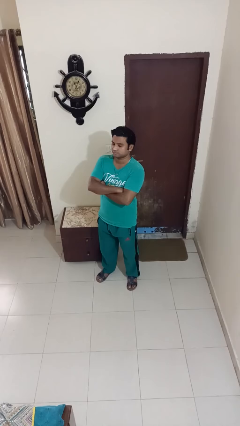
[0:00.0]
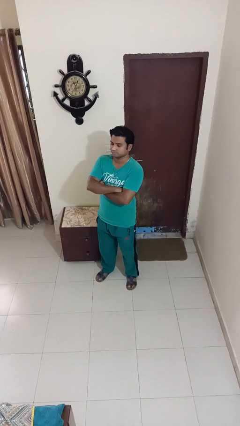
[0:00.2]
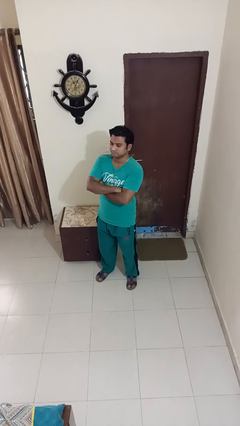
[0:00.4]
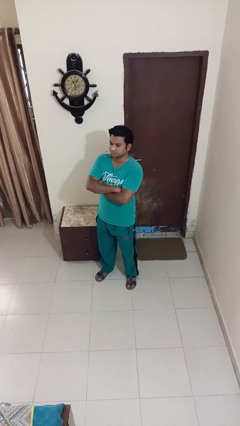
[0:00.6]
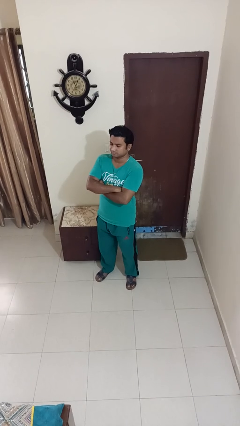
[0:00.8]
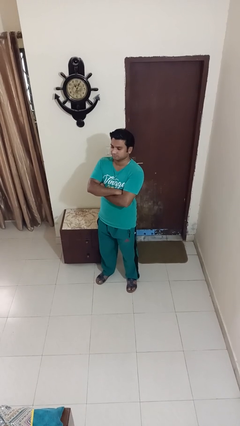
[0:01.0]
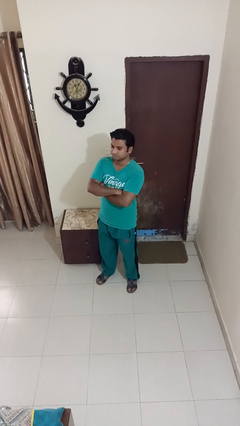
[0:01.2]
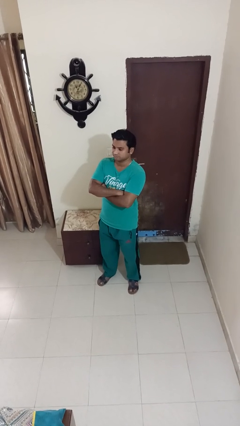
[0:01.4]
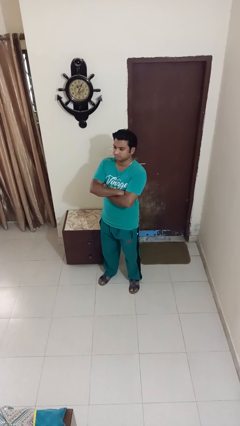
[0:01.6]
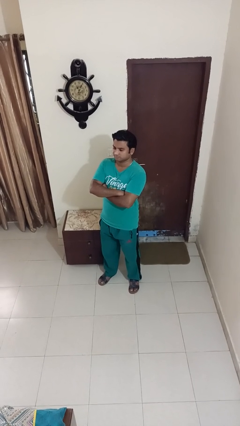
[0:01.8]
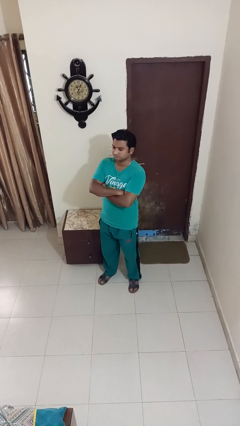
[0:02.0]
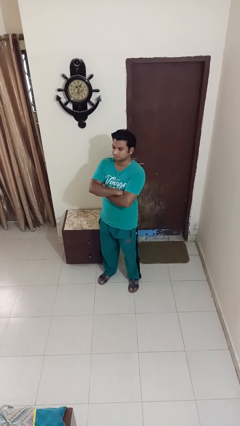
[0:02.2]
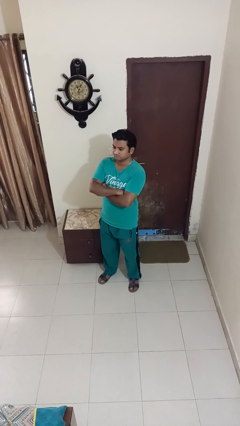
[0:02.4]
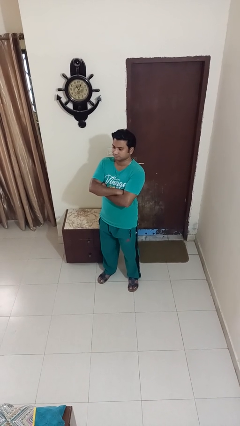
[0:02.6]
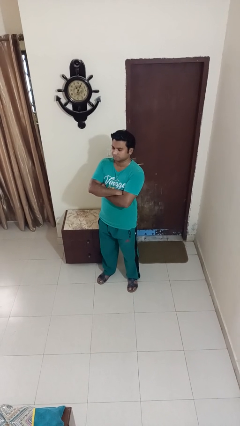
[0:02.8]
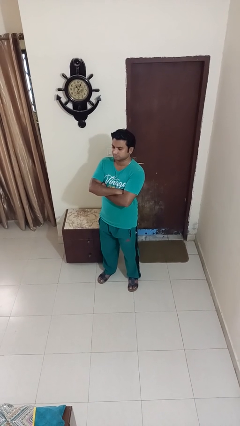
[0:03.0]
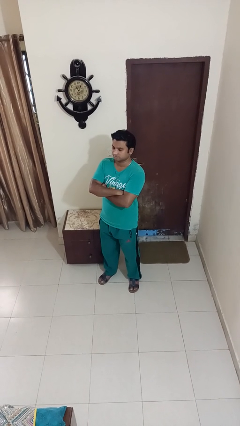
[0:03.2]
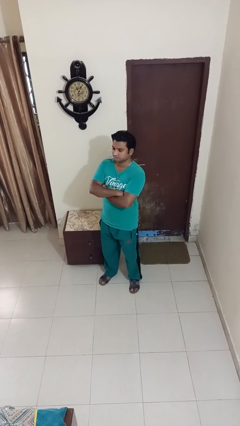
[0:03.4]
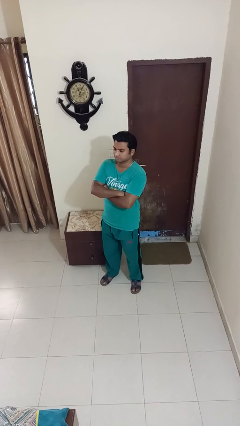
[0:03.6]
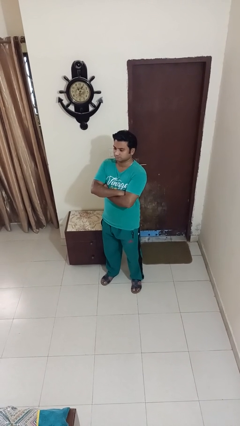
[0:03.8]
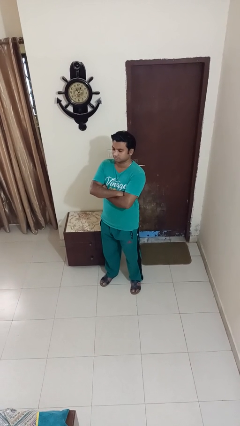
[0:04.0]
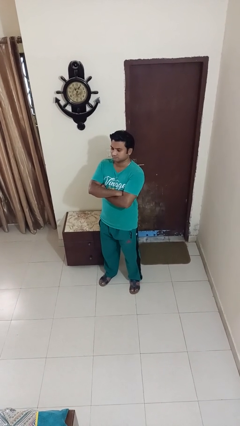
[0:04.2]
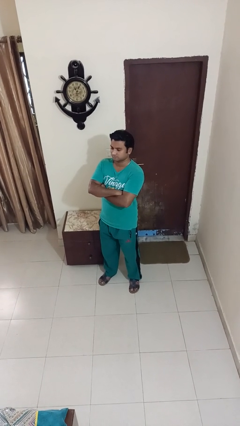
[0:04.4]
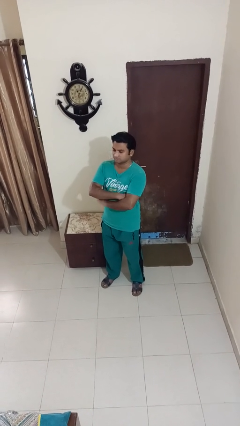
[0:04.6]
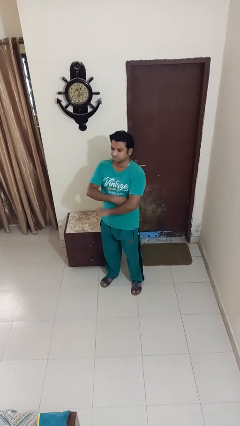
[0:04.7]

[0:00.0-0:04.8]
person gestures arms x

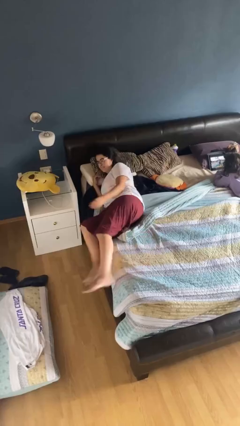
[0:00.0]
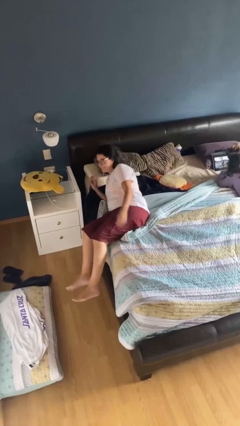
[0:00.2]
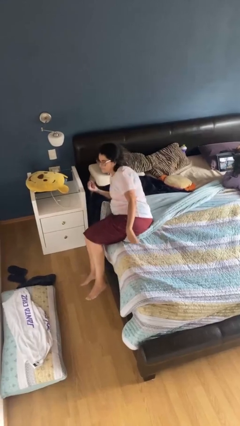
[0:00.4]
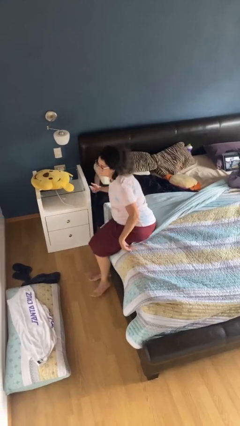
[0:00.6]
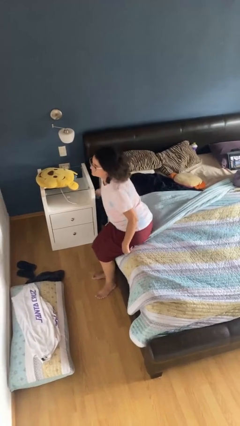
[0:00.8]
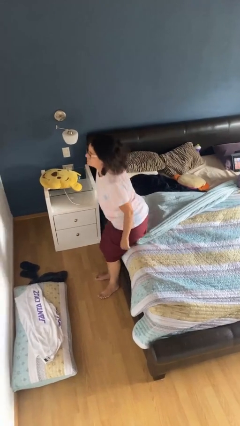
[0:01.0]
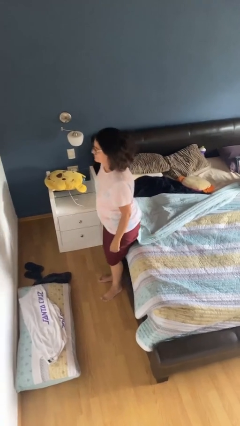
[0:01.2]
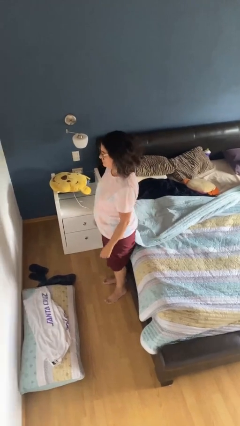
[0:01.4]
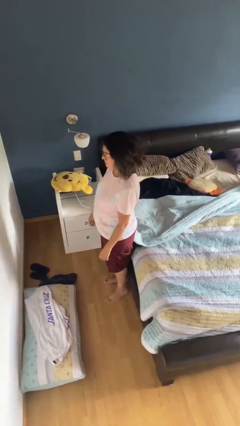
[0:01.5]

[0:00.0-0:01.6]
person stands up

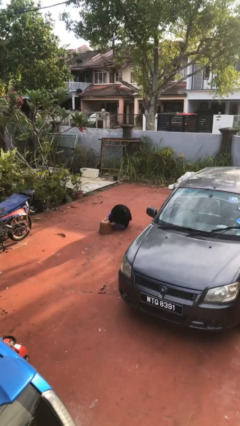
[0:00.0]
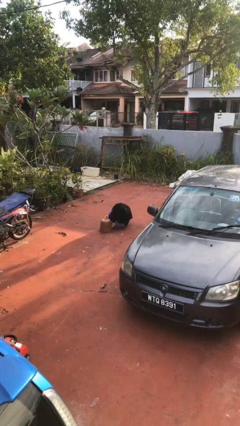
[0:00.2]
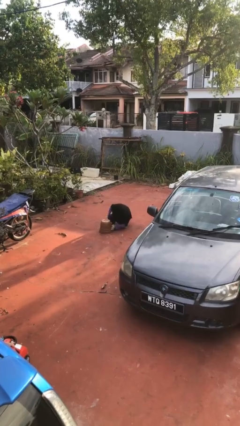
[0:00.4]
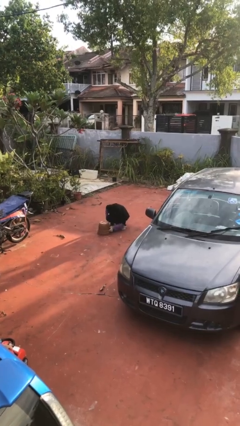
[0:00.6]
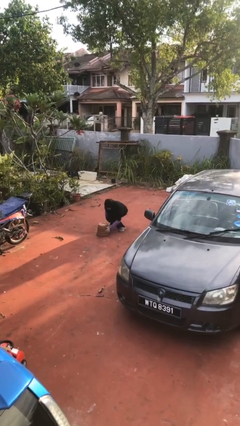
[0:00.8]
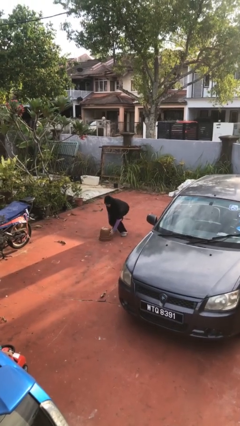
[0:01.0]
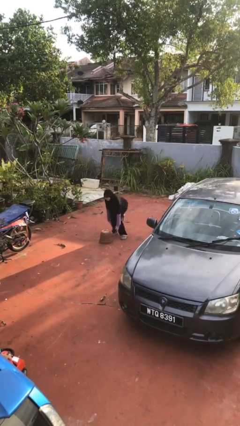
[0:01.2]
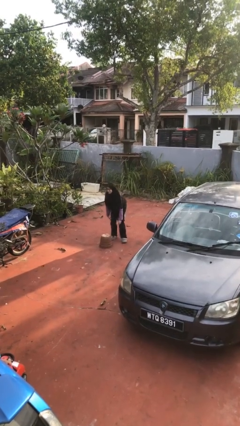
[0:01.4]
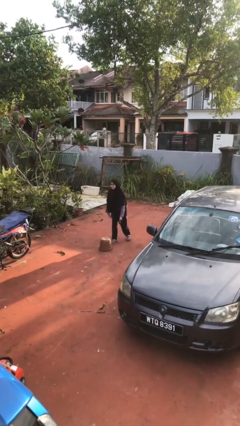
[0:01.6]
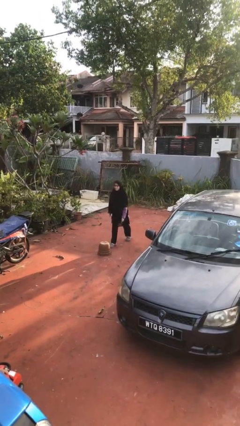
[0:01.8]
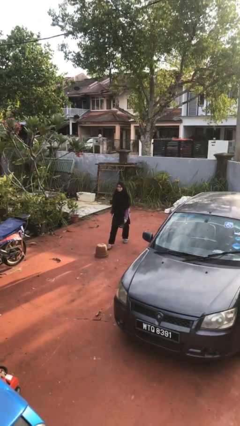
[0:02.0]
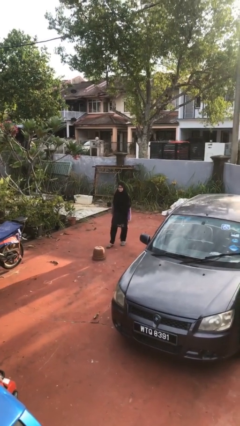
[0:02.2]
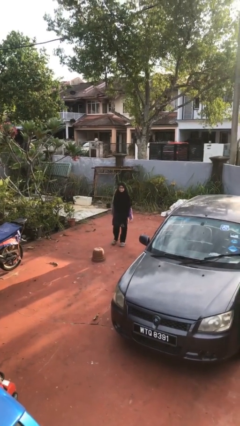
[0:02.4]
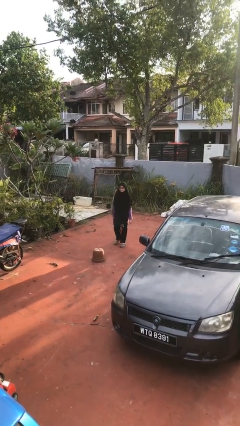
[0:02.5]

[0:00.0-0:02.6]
person stands up from floor

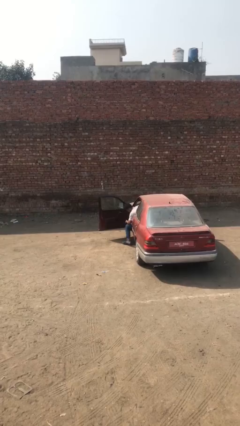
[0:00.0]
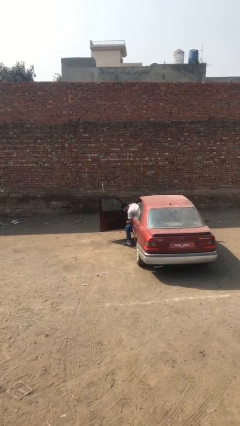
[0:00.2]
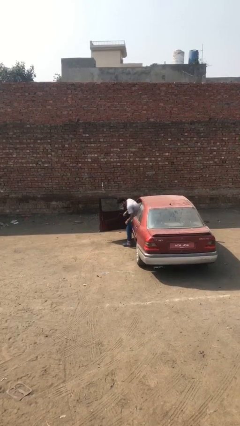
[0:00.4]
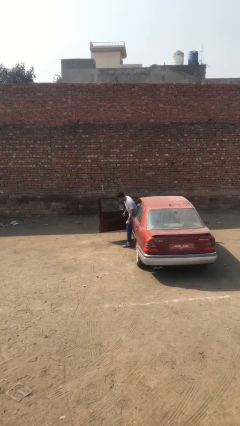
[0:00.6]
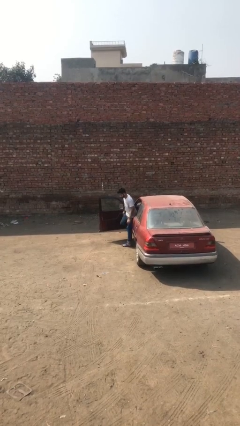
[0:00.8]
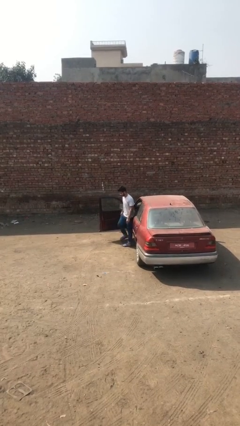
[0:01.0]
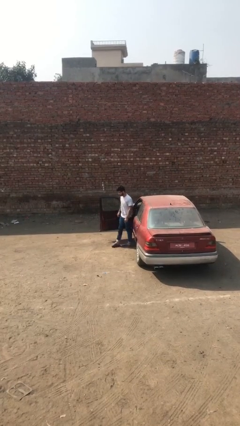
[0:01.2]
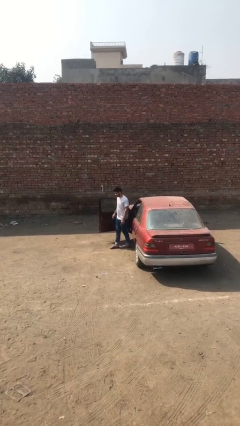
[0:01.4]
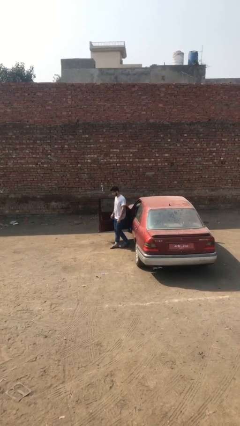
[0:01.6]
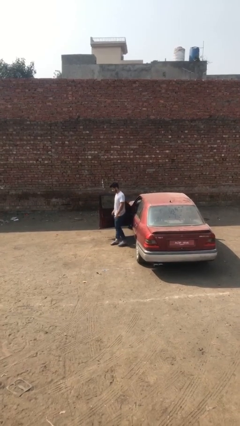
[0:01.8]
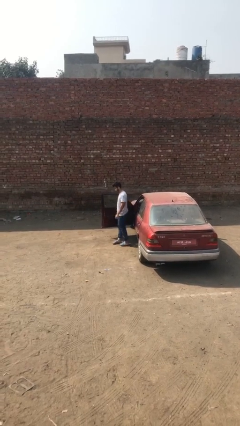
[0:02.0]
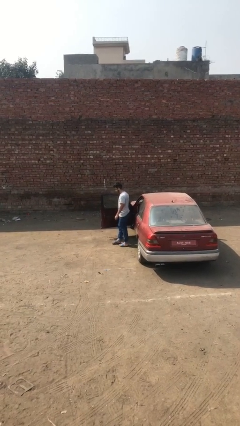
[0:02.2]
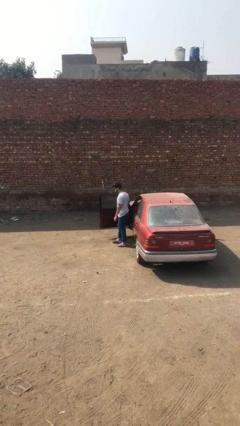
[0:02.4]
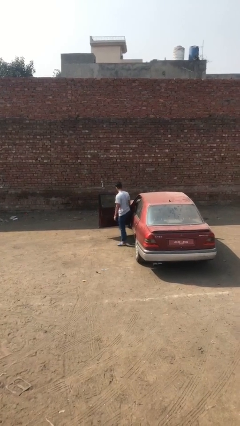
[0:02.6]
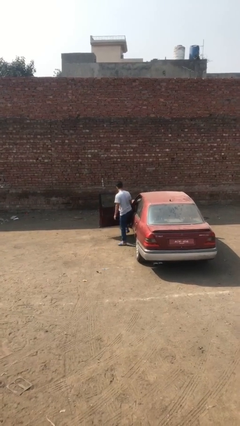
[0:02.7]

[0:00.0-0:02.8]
person exits car

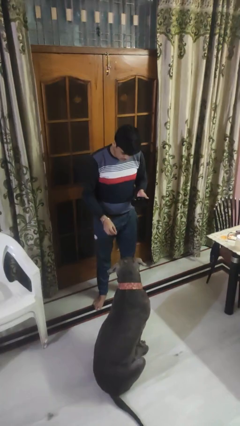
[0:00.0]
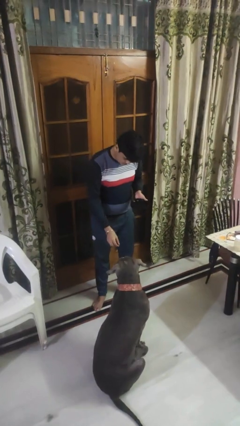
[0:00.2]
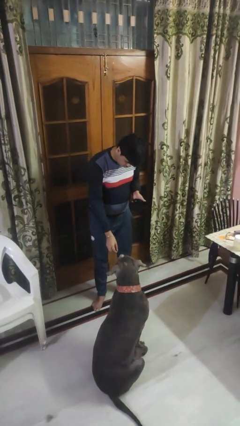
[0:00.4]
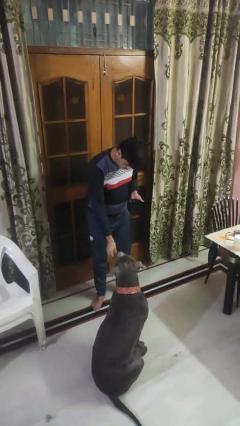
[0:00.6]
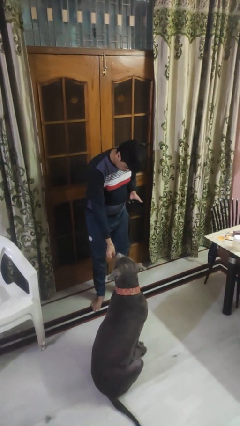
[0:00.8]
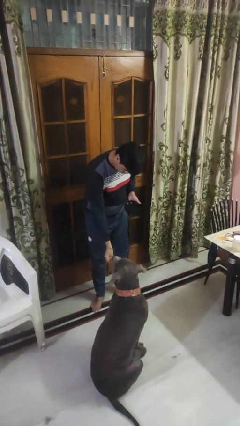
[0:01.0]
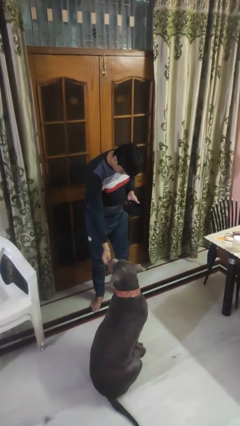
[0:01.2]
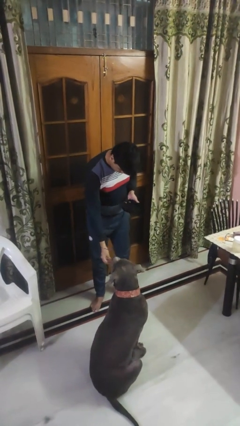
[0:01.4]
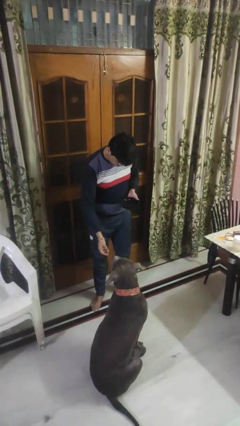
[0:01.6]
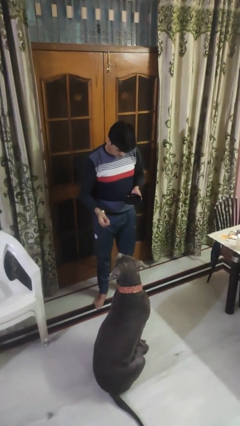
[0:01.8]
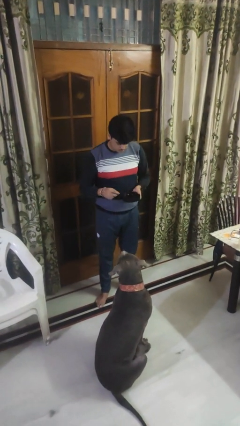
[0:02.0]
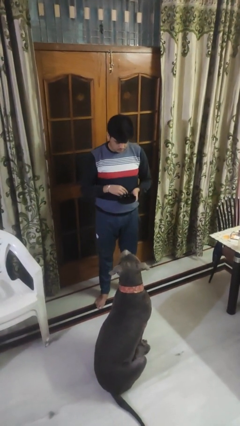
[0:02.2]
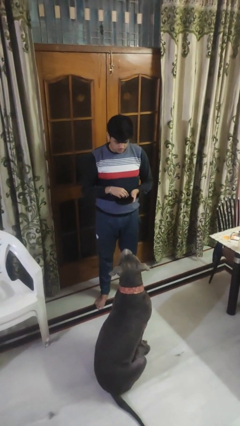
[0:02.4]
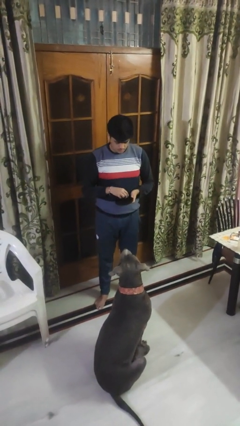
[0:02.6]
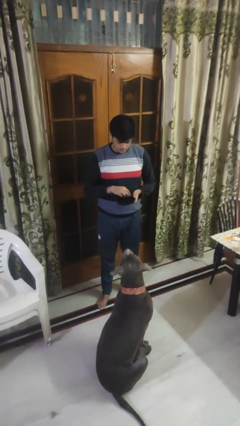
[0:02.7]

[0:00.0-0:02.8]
person feeds dog

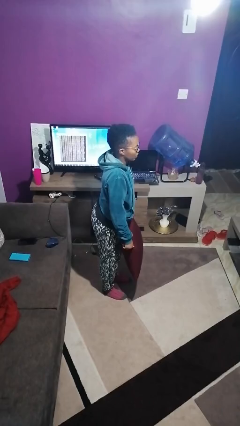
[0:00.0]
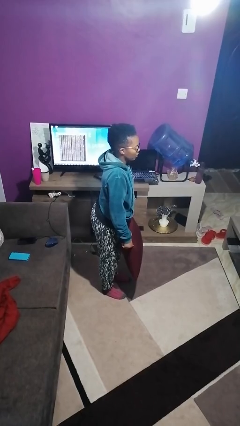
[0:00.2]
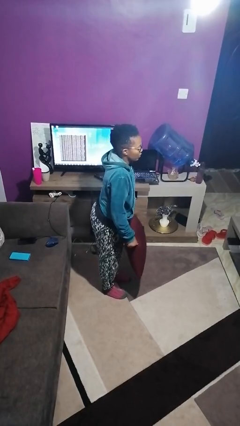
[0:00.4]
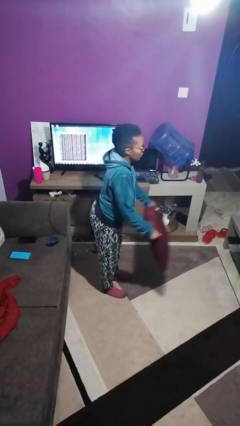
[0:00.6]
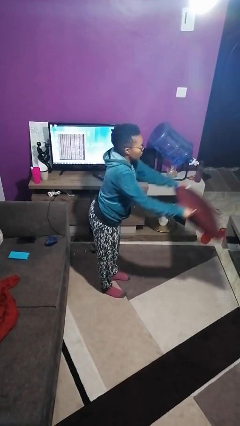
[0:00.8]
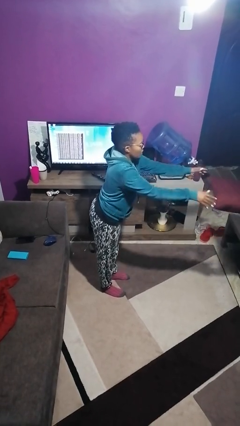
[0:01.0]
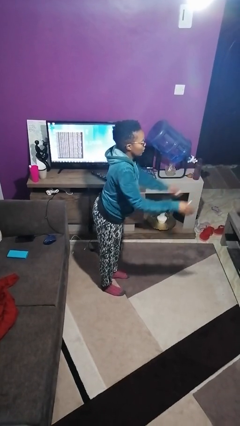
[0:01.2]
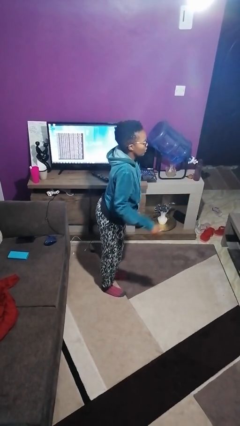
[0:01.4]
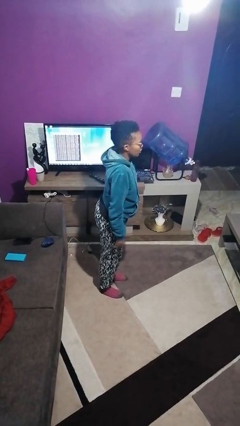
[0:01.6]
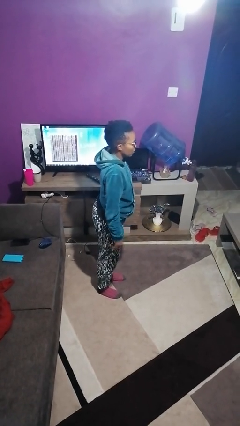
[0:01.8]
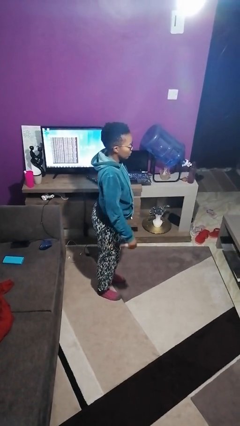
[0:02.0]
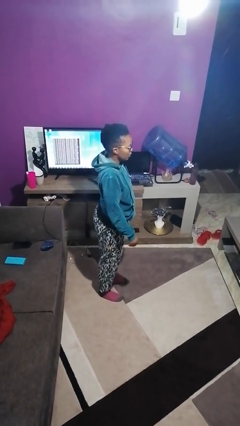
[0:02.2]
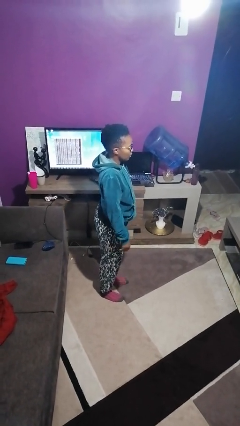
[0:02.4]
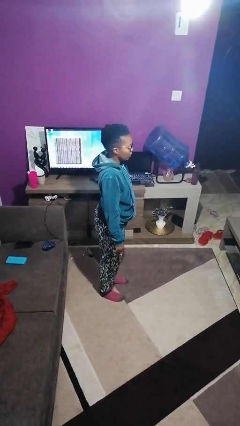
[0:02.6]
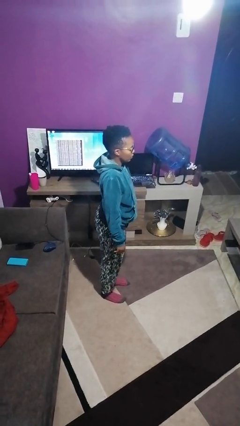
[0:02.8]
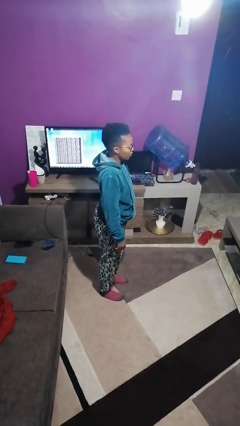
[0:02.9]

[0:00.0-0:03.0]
person throws object on table
